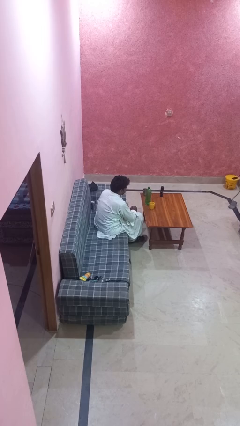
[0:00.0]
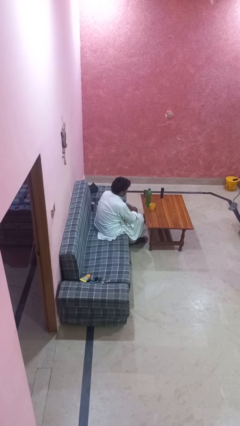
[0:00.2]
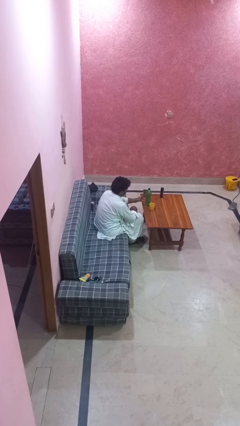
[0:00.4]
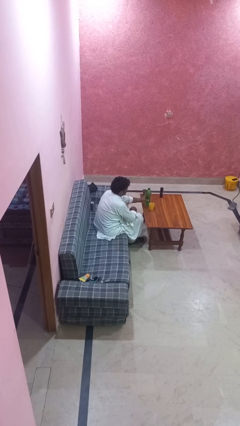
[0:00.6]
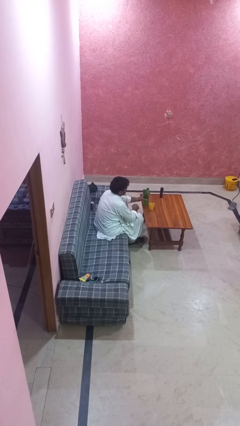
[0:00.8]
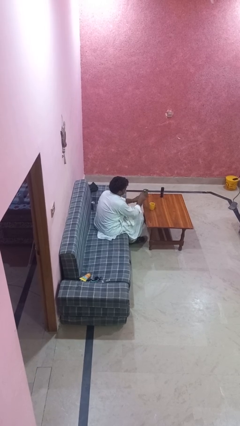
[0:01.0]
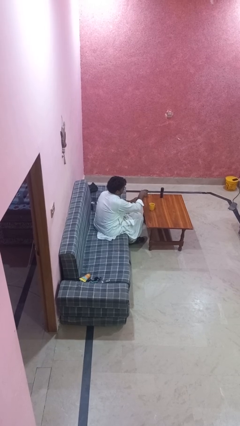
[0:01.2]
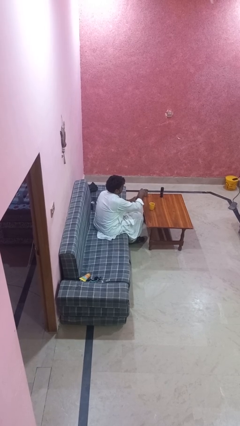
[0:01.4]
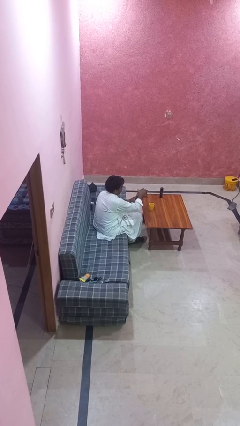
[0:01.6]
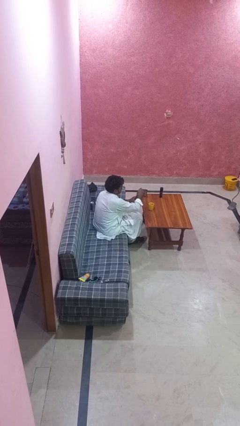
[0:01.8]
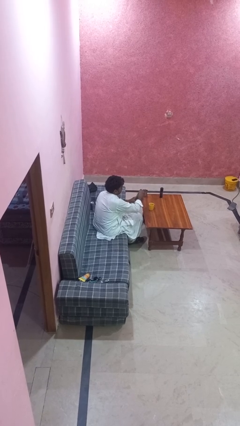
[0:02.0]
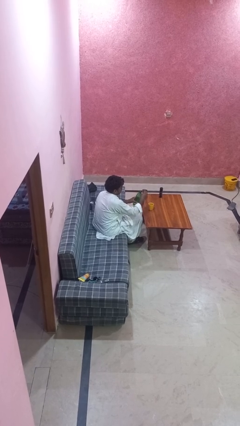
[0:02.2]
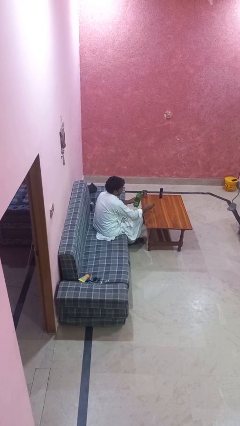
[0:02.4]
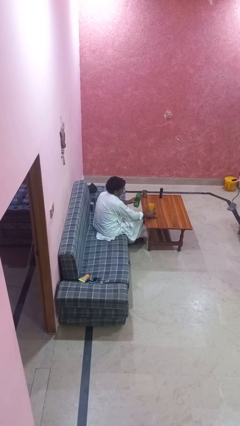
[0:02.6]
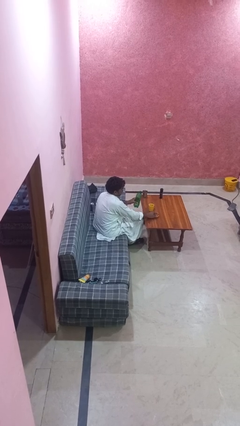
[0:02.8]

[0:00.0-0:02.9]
person unscrews lid from bottle

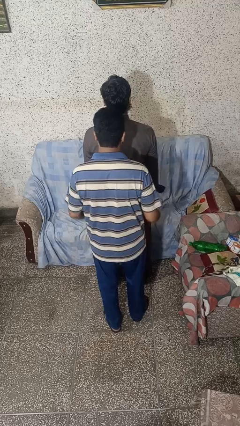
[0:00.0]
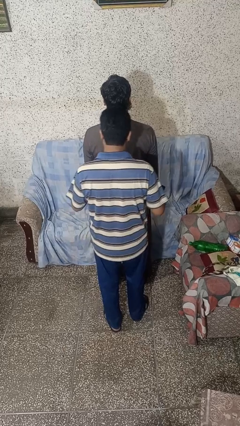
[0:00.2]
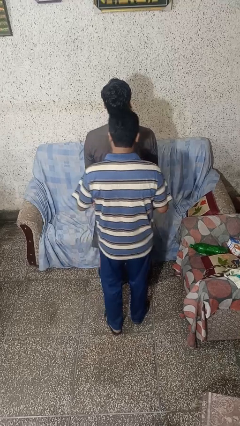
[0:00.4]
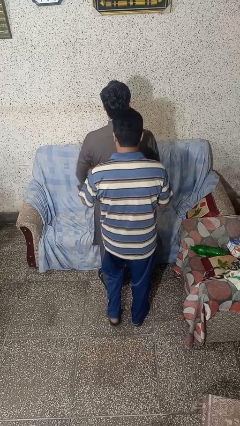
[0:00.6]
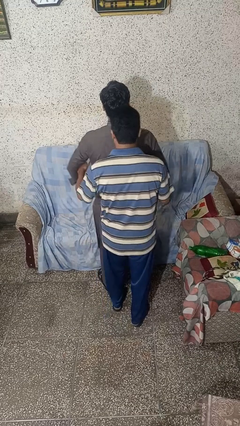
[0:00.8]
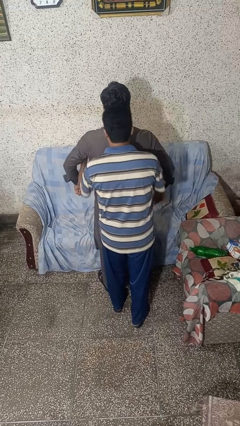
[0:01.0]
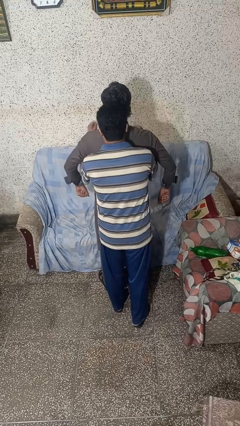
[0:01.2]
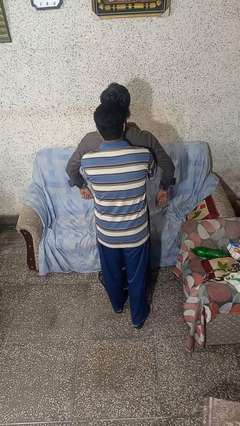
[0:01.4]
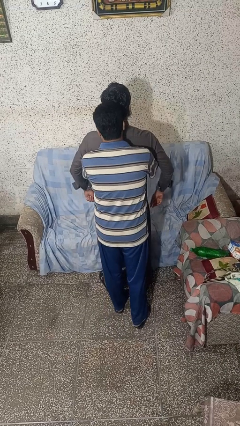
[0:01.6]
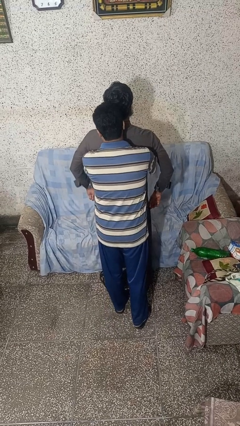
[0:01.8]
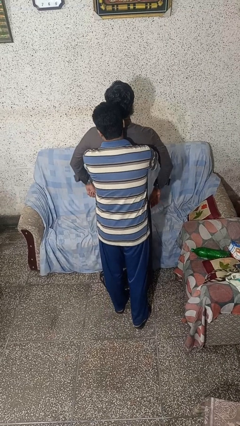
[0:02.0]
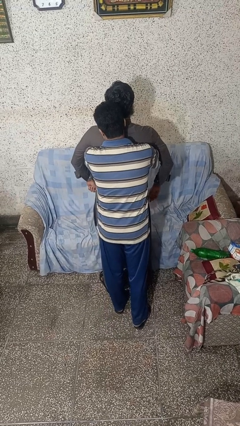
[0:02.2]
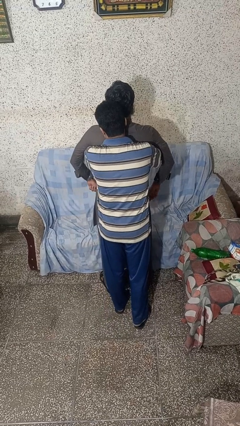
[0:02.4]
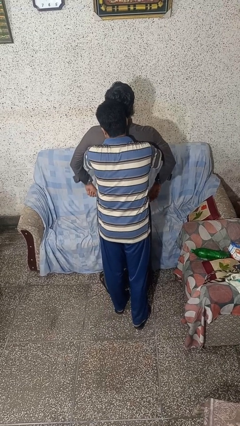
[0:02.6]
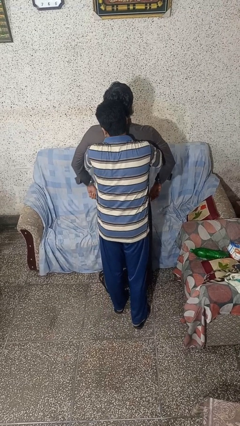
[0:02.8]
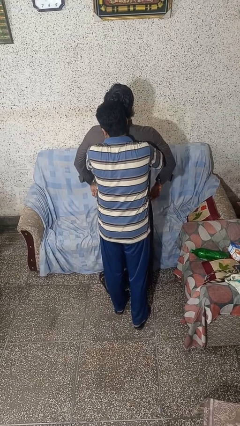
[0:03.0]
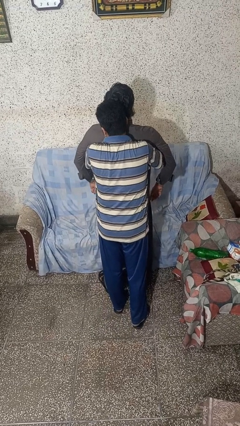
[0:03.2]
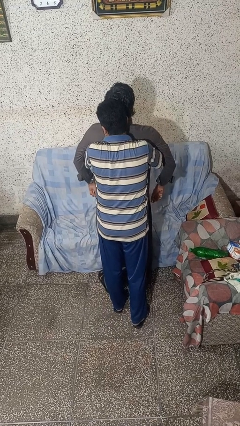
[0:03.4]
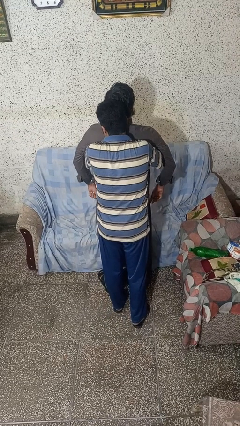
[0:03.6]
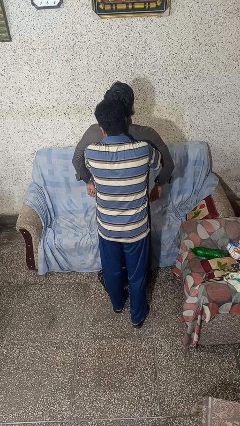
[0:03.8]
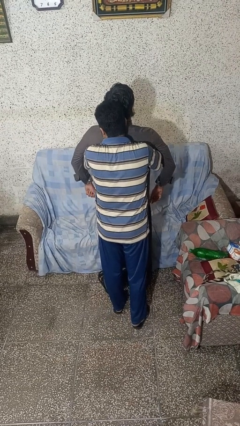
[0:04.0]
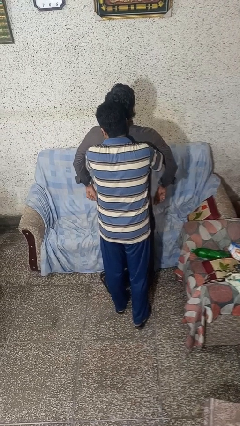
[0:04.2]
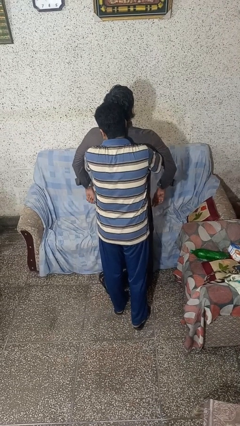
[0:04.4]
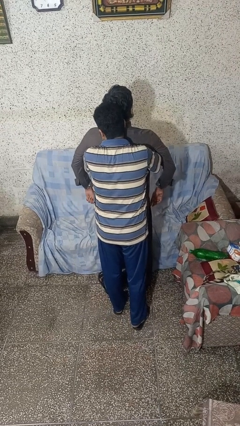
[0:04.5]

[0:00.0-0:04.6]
person hugs person from behind

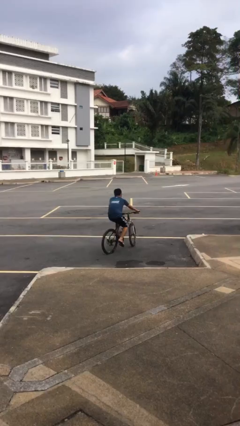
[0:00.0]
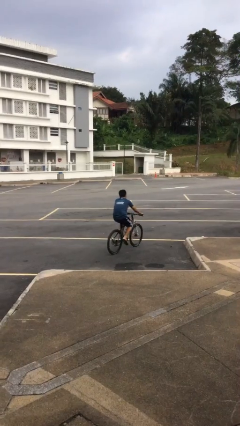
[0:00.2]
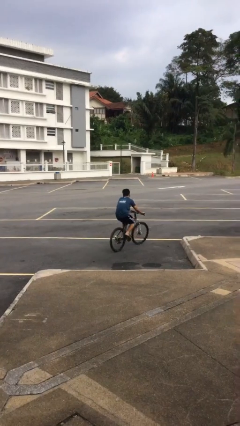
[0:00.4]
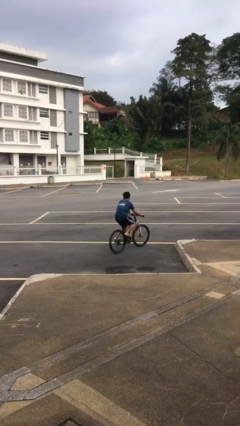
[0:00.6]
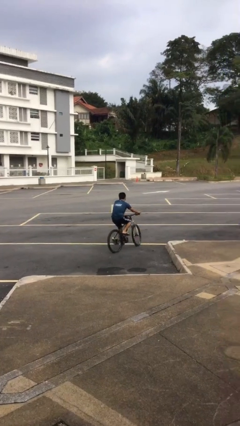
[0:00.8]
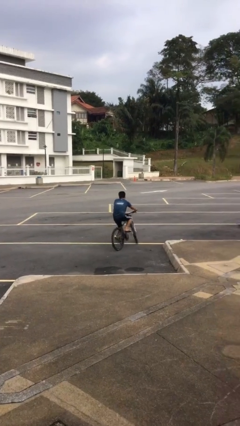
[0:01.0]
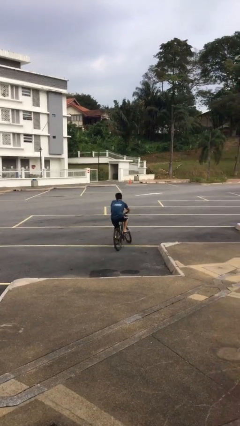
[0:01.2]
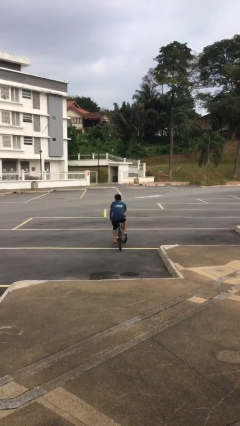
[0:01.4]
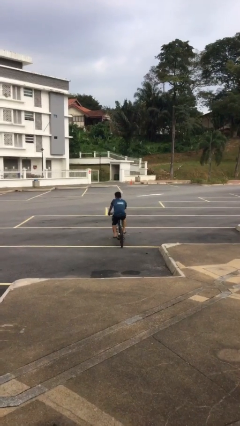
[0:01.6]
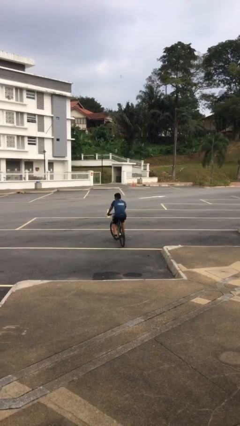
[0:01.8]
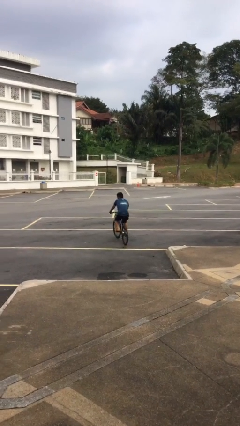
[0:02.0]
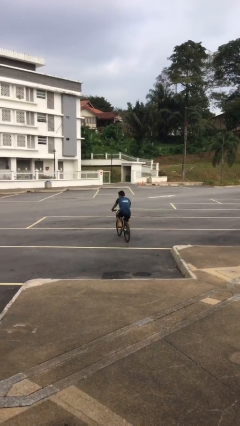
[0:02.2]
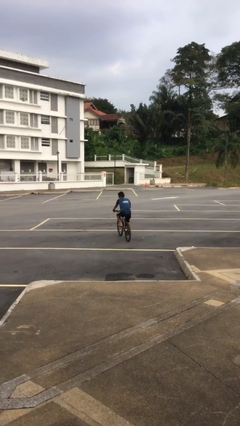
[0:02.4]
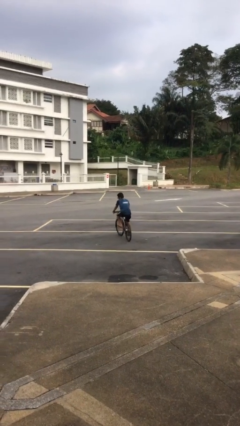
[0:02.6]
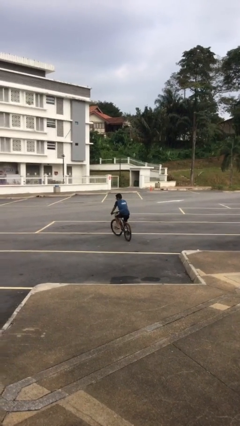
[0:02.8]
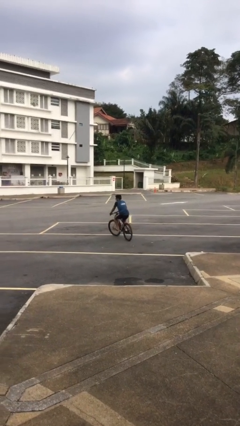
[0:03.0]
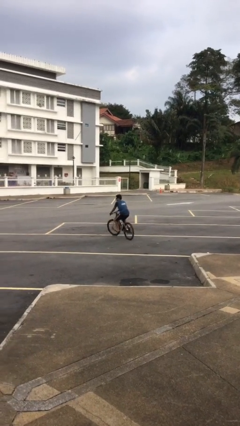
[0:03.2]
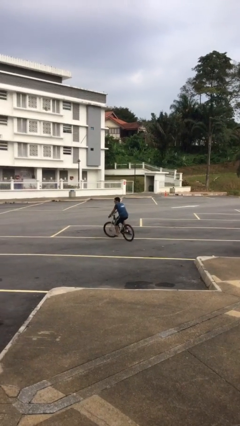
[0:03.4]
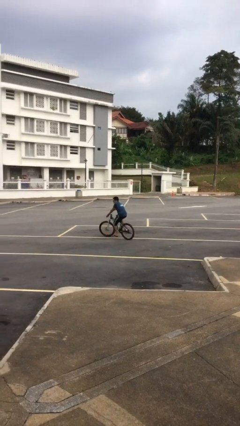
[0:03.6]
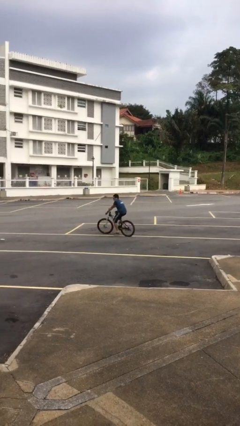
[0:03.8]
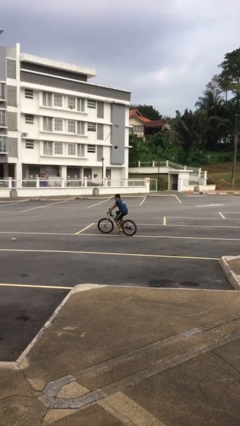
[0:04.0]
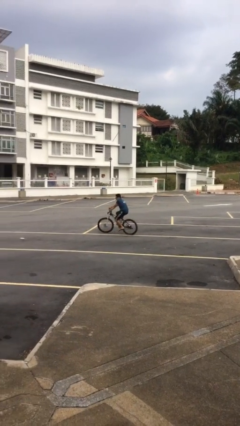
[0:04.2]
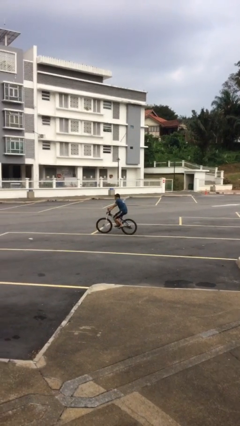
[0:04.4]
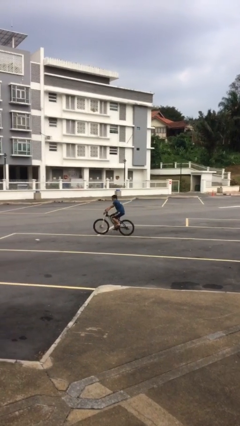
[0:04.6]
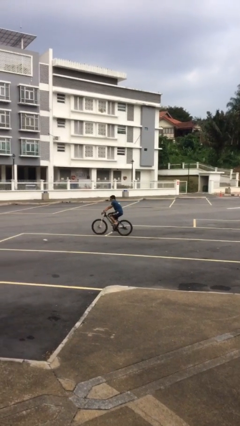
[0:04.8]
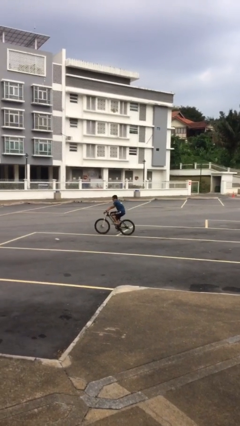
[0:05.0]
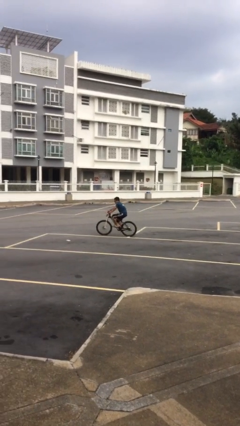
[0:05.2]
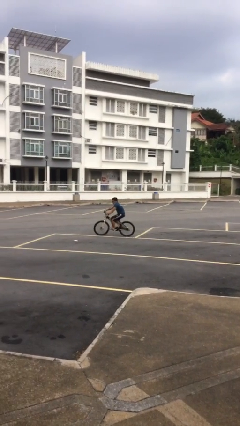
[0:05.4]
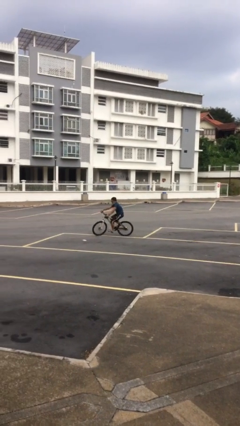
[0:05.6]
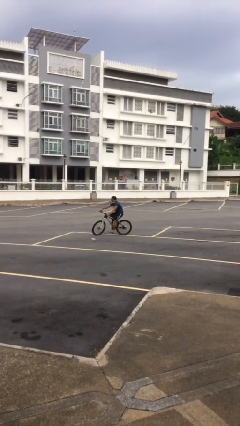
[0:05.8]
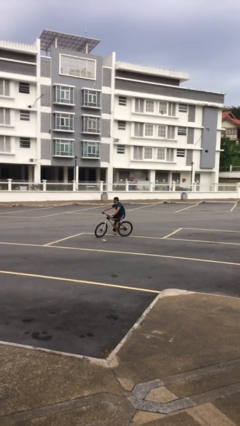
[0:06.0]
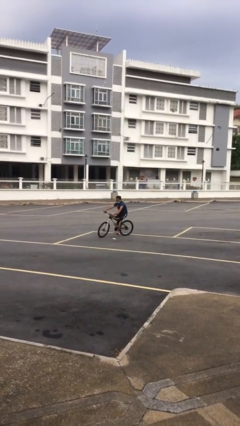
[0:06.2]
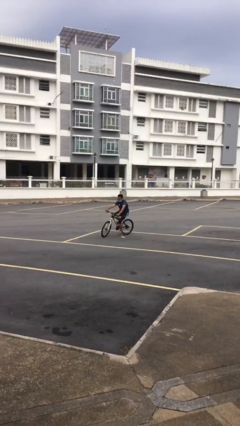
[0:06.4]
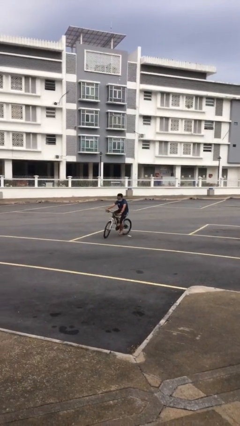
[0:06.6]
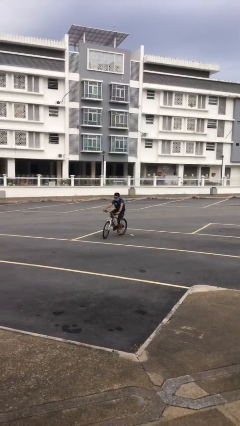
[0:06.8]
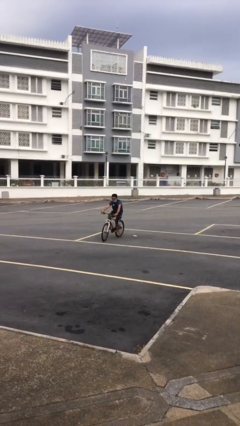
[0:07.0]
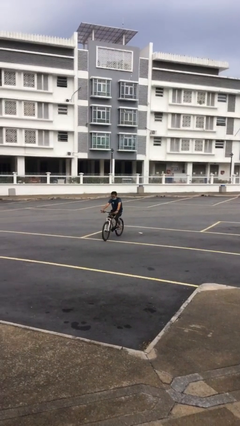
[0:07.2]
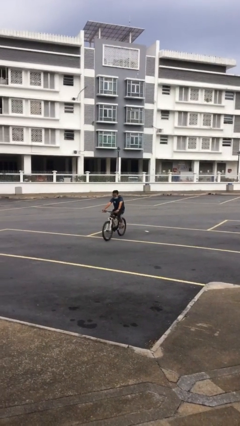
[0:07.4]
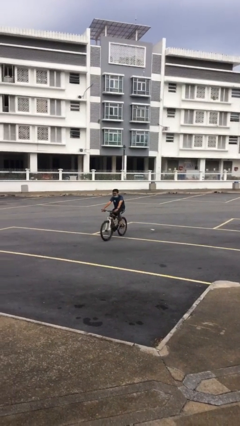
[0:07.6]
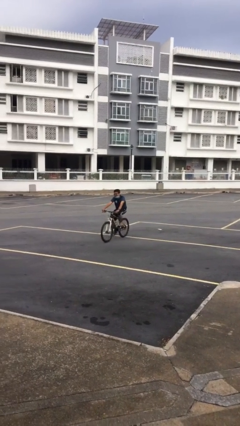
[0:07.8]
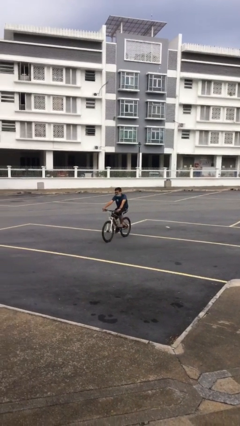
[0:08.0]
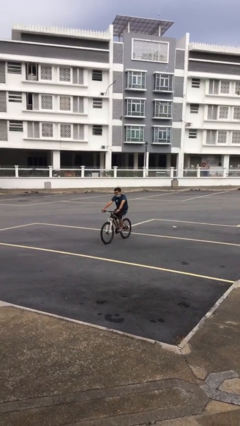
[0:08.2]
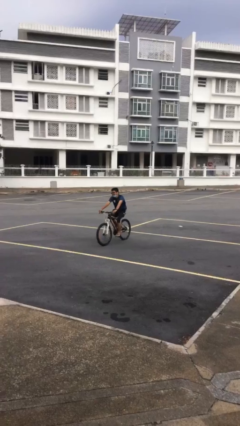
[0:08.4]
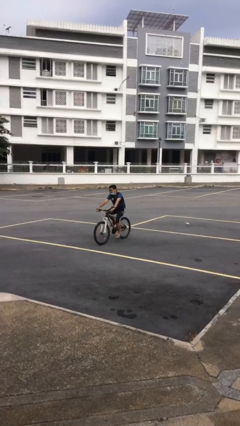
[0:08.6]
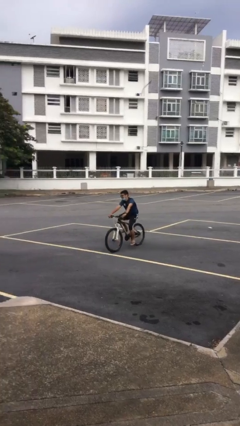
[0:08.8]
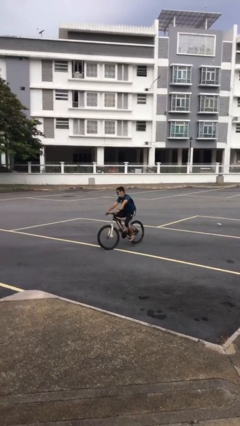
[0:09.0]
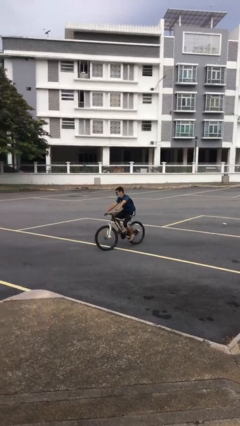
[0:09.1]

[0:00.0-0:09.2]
person rides bicycle

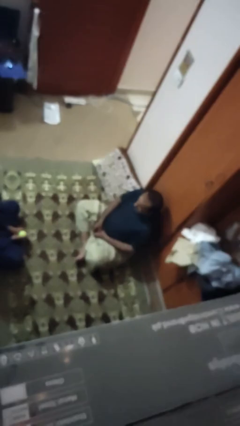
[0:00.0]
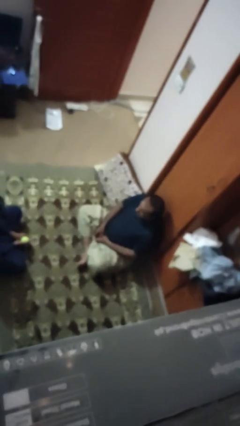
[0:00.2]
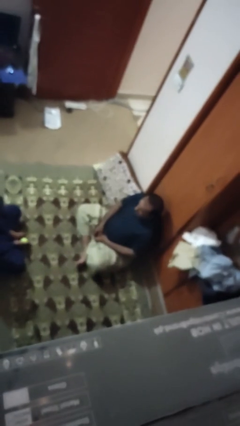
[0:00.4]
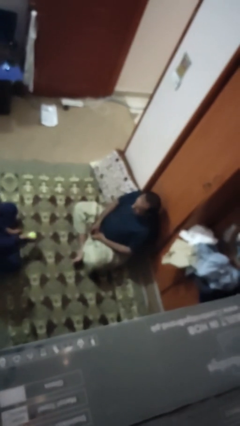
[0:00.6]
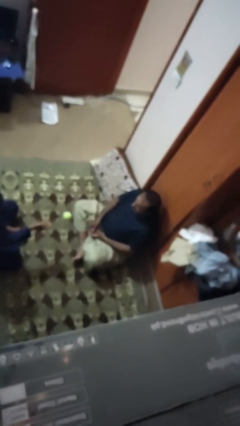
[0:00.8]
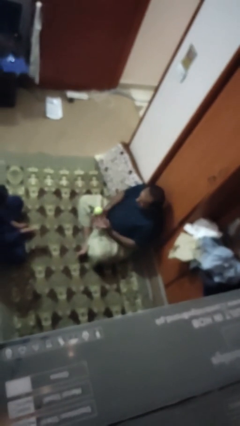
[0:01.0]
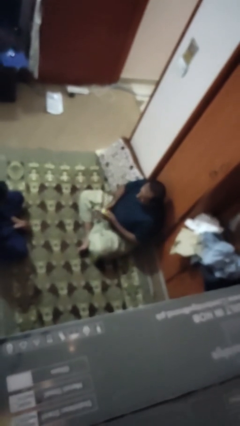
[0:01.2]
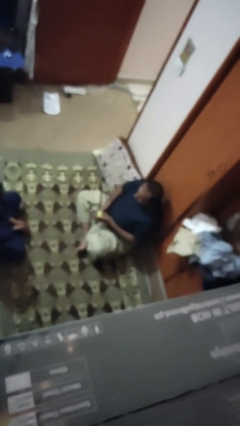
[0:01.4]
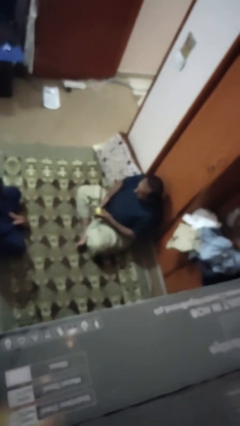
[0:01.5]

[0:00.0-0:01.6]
person catches object from person
